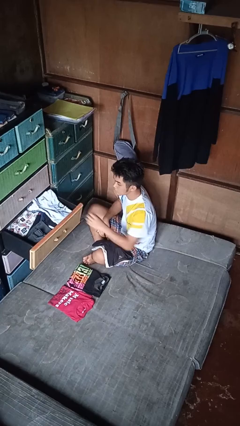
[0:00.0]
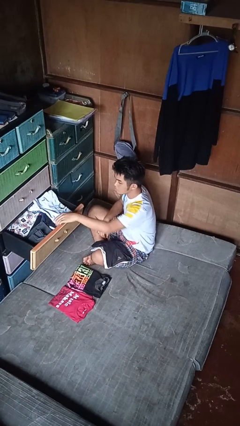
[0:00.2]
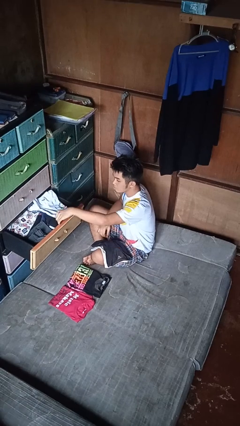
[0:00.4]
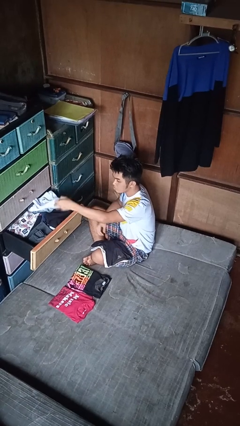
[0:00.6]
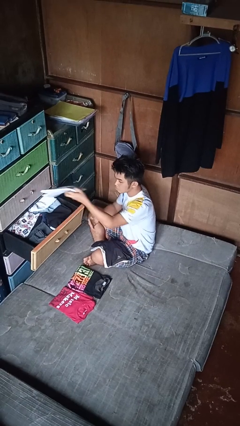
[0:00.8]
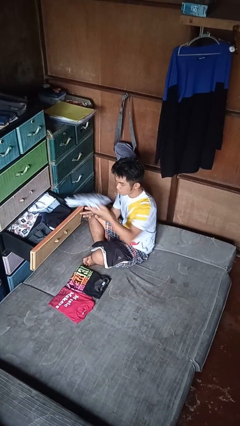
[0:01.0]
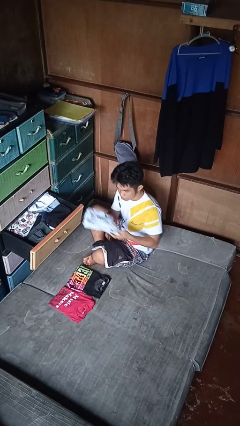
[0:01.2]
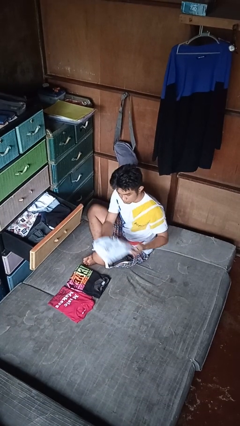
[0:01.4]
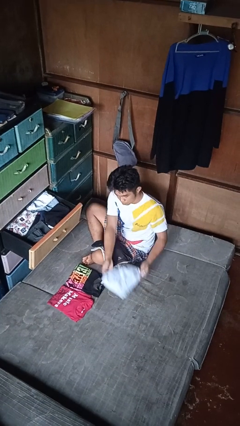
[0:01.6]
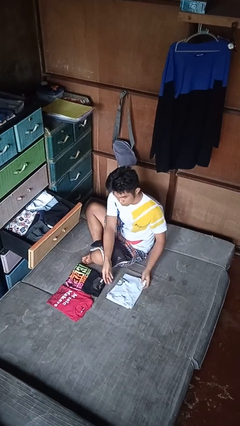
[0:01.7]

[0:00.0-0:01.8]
person takes clothes from dresser

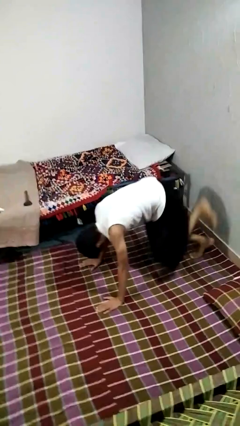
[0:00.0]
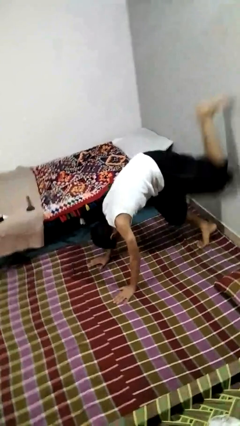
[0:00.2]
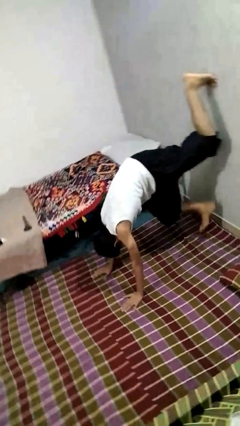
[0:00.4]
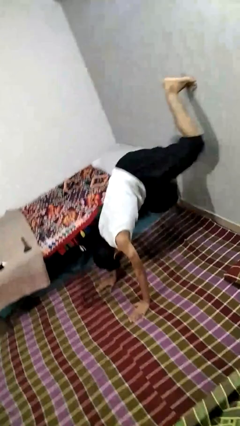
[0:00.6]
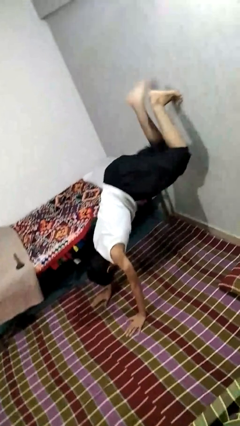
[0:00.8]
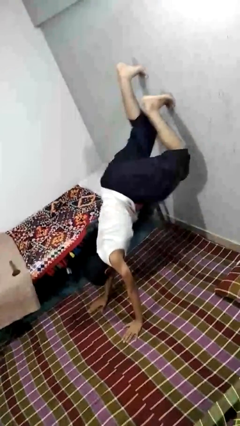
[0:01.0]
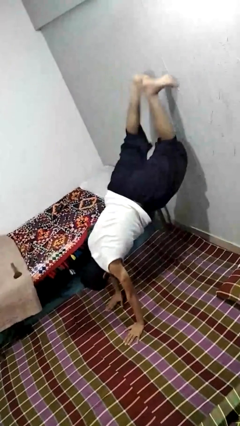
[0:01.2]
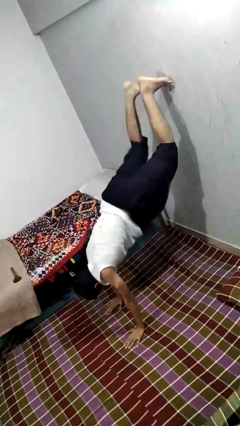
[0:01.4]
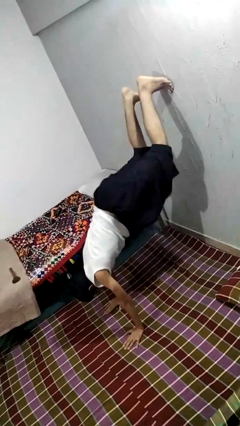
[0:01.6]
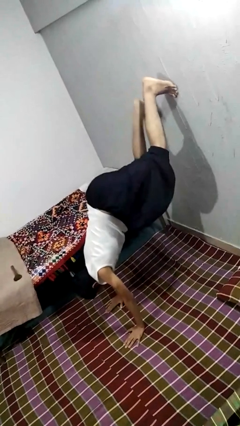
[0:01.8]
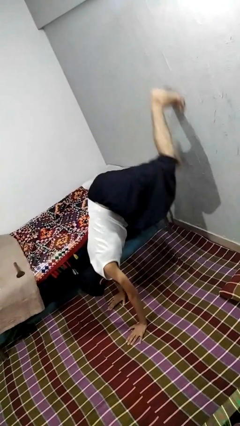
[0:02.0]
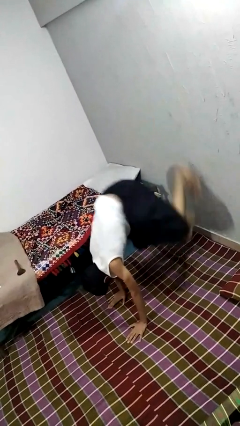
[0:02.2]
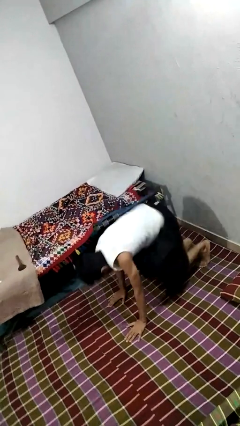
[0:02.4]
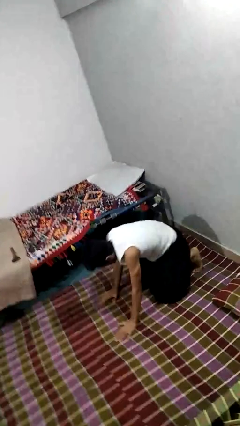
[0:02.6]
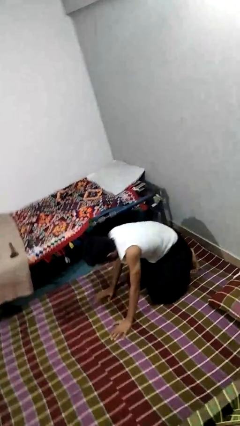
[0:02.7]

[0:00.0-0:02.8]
person handstand

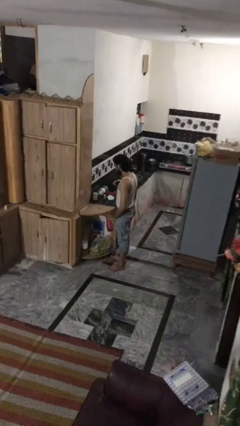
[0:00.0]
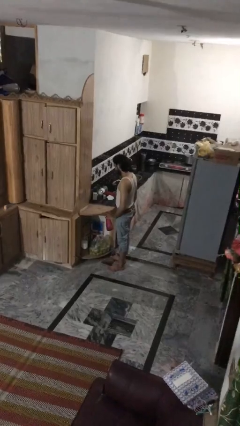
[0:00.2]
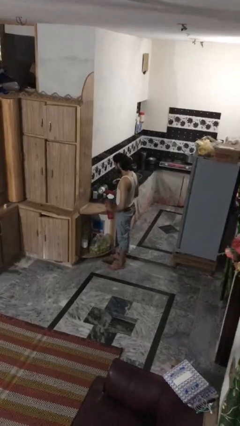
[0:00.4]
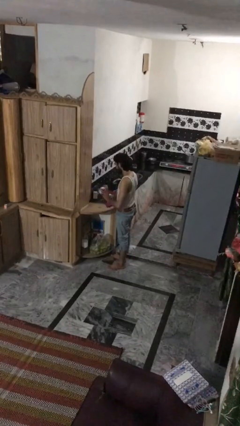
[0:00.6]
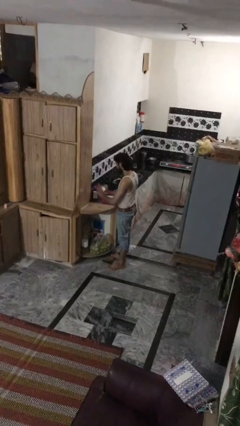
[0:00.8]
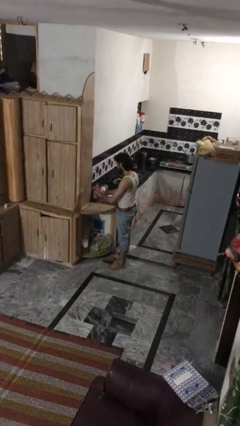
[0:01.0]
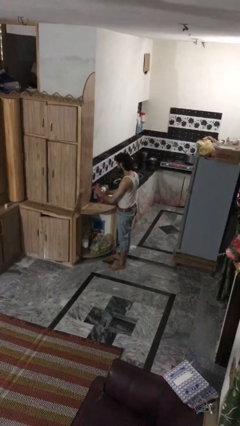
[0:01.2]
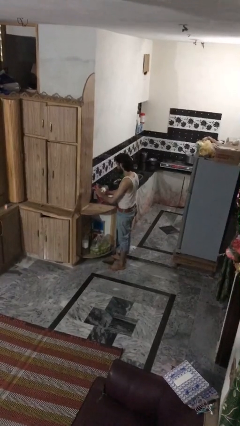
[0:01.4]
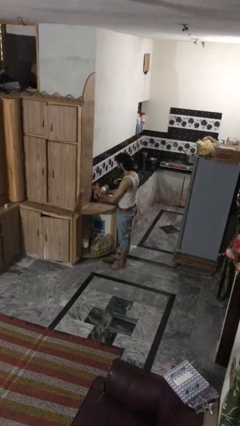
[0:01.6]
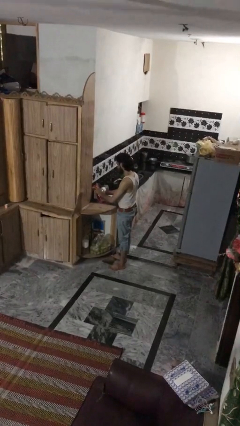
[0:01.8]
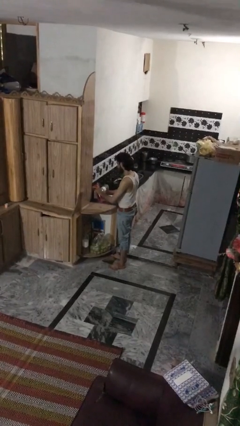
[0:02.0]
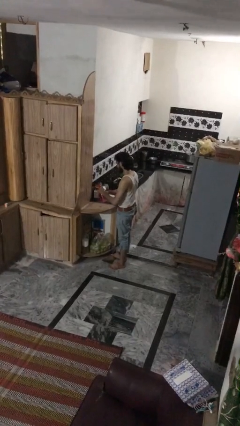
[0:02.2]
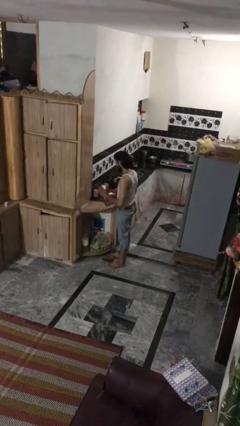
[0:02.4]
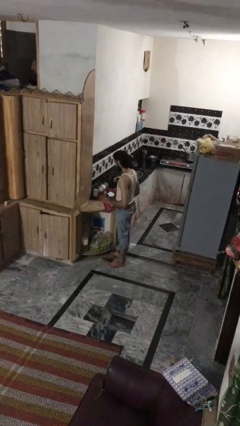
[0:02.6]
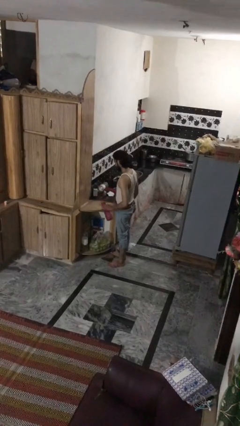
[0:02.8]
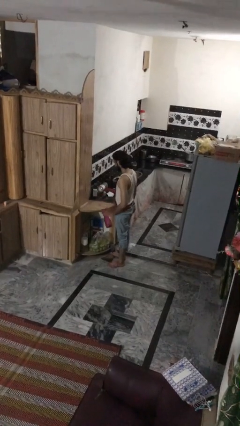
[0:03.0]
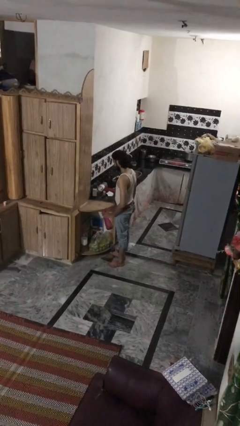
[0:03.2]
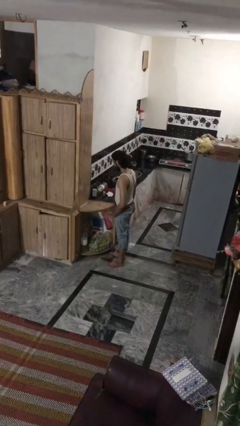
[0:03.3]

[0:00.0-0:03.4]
person sprays from bottle

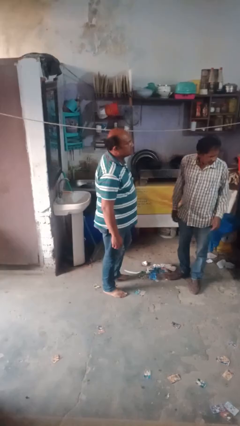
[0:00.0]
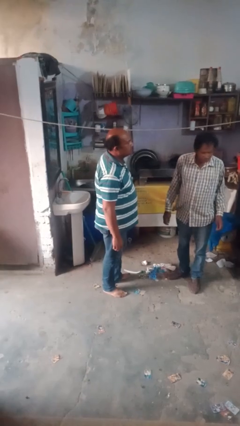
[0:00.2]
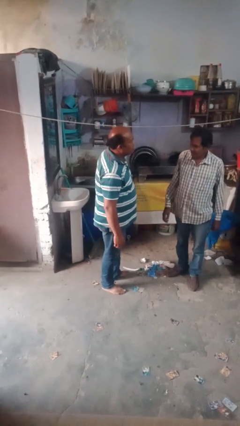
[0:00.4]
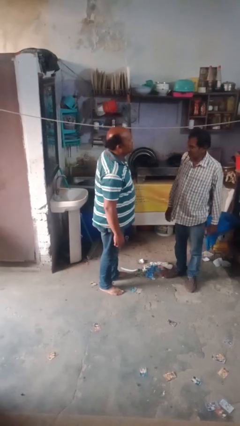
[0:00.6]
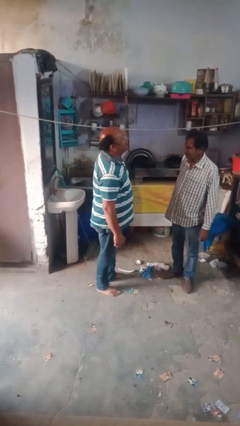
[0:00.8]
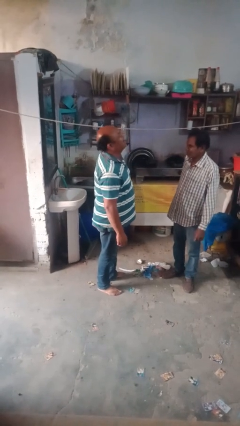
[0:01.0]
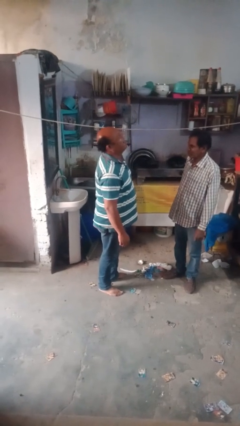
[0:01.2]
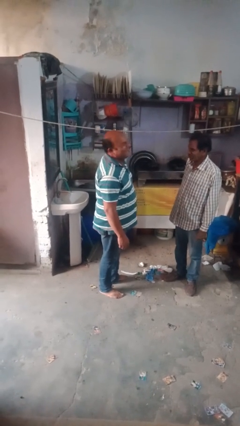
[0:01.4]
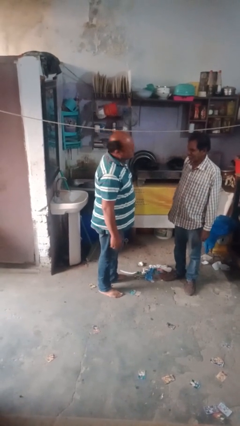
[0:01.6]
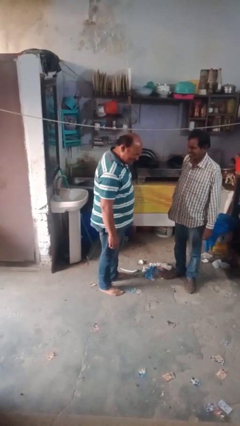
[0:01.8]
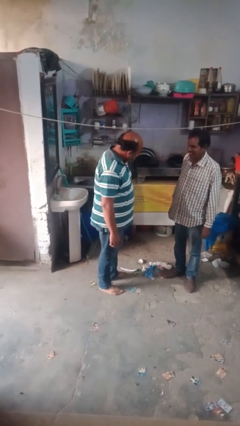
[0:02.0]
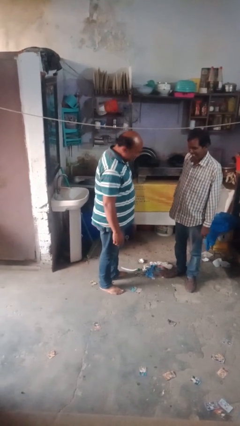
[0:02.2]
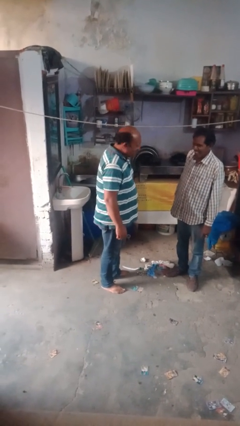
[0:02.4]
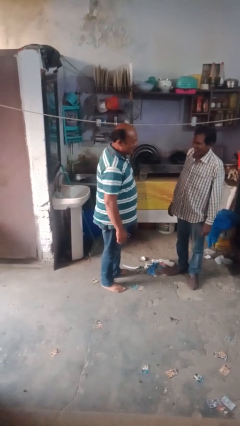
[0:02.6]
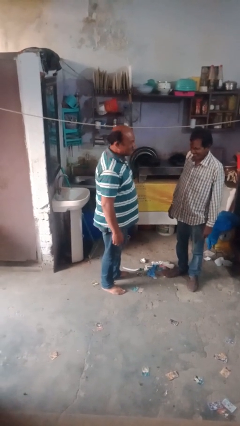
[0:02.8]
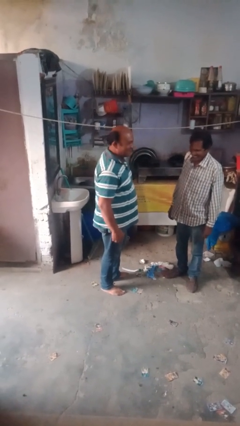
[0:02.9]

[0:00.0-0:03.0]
person laughs with person

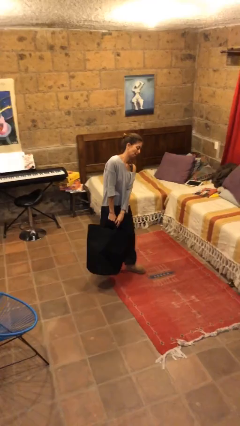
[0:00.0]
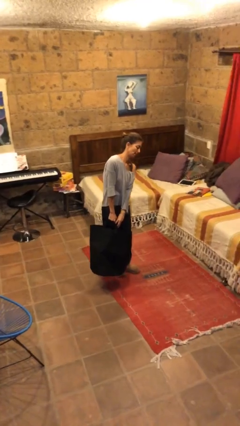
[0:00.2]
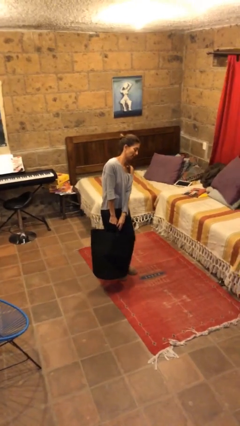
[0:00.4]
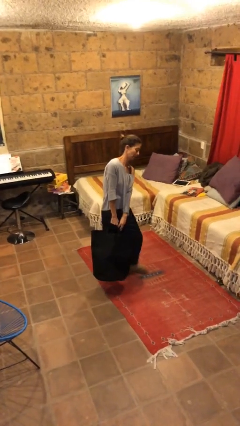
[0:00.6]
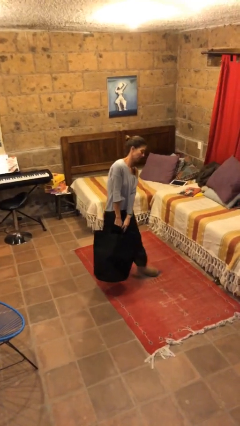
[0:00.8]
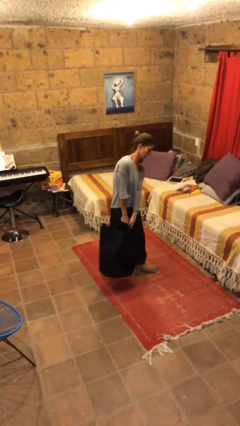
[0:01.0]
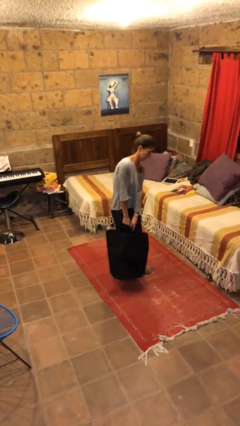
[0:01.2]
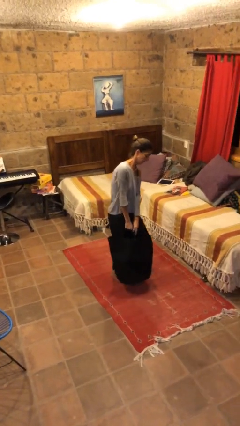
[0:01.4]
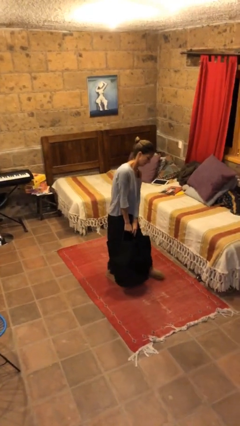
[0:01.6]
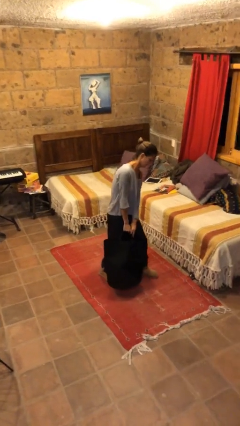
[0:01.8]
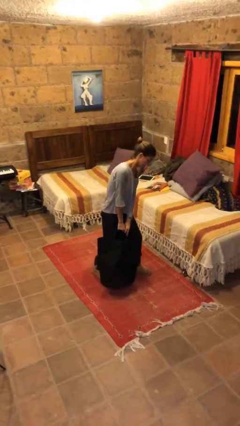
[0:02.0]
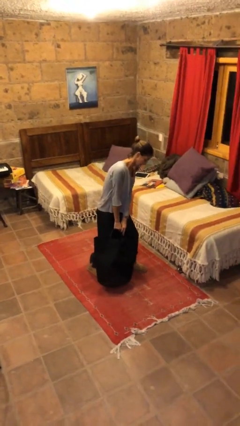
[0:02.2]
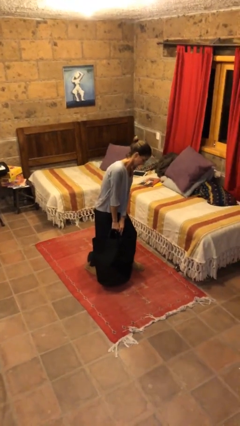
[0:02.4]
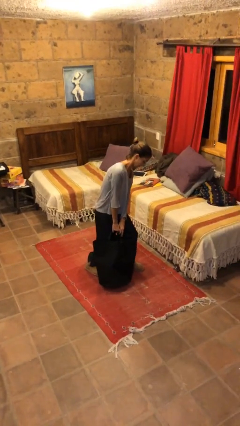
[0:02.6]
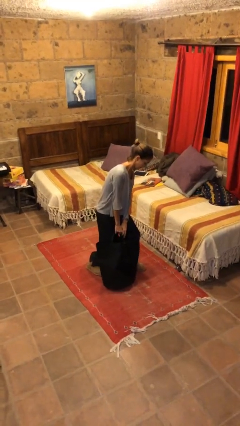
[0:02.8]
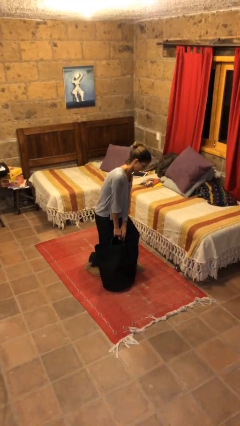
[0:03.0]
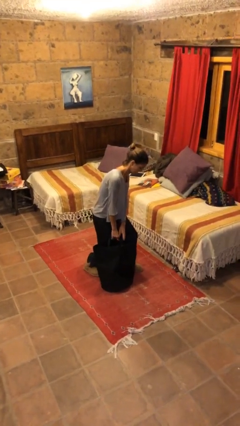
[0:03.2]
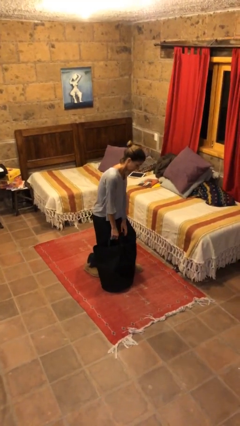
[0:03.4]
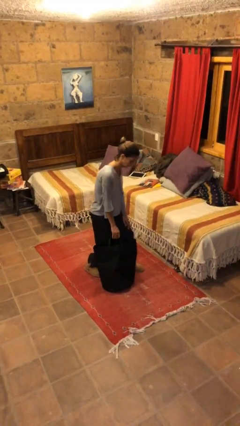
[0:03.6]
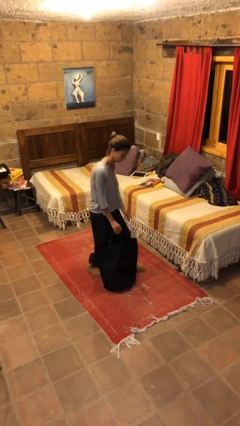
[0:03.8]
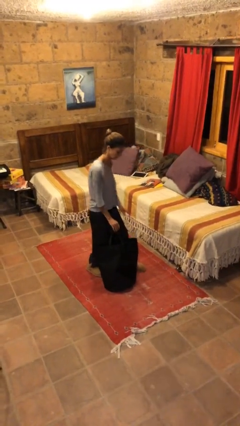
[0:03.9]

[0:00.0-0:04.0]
person puts down object on floor

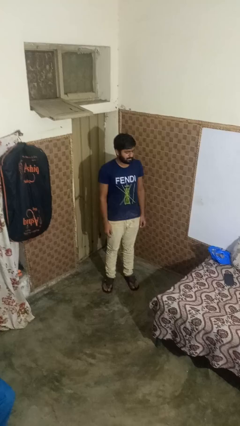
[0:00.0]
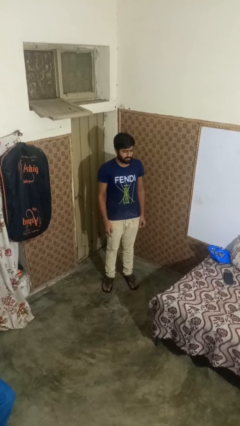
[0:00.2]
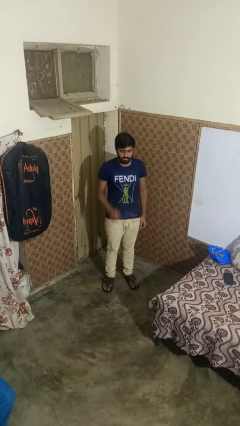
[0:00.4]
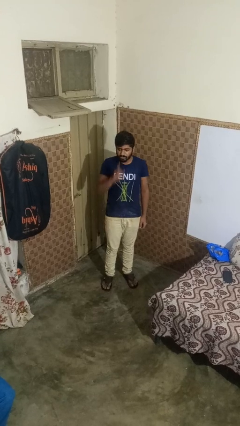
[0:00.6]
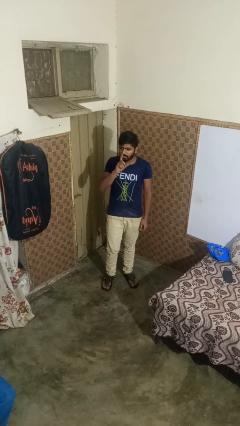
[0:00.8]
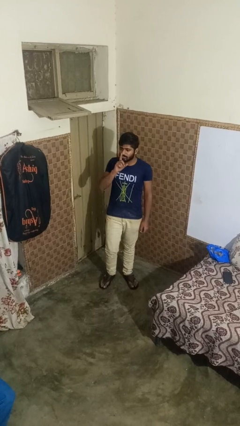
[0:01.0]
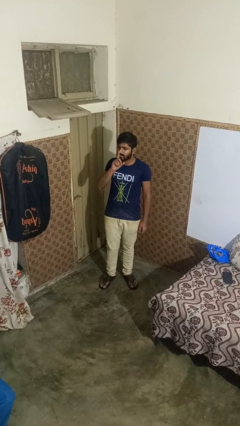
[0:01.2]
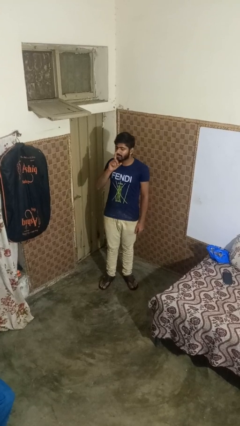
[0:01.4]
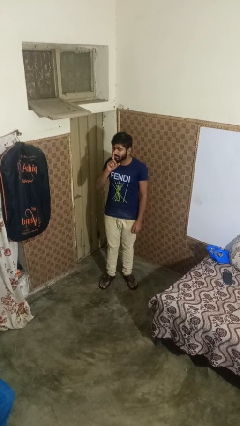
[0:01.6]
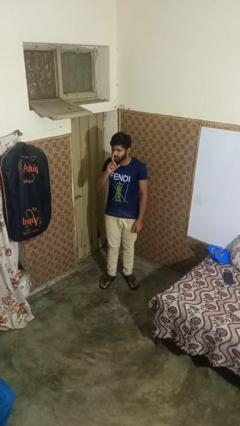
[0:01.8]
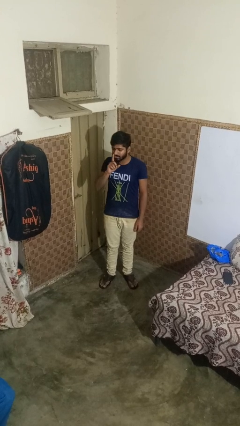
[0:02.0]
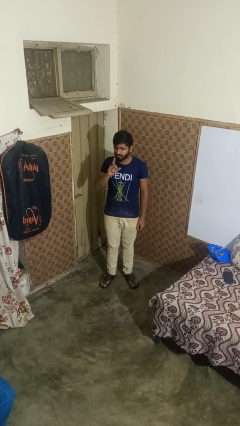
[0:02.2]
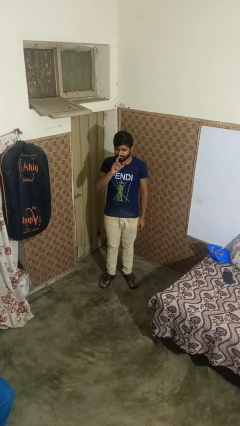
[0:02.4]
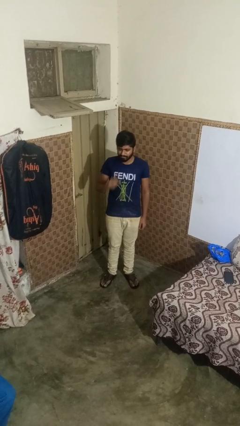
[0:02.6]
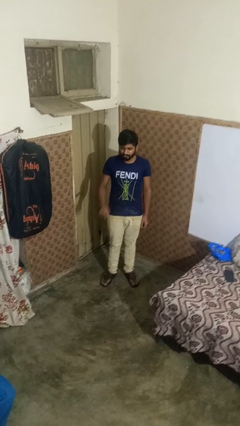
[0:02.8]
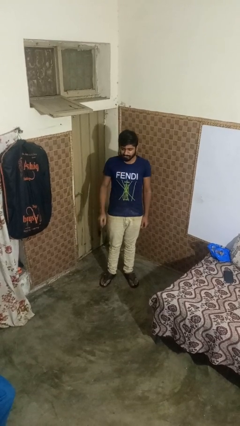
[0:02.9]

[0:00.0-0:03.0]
person gestures be quiet
